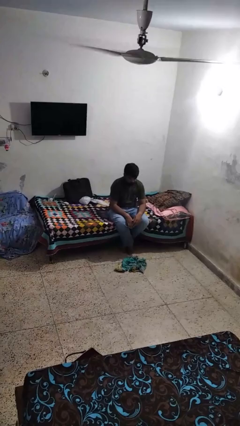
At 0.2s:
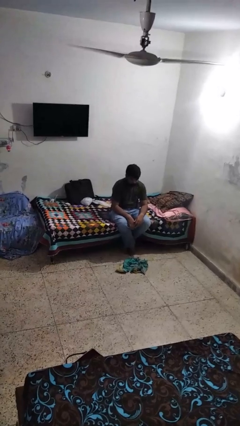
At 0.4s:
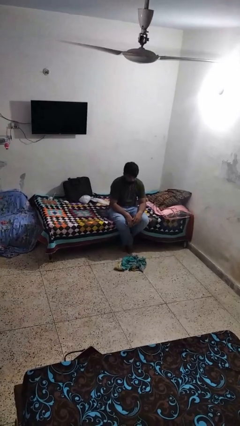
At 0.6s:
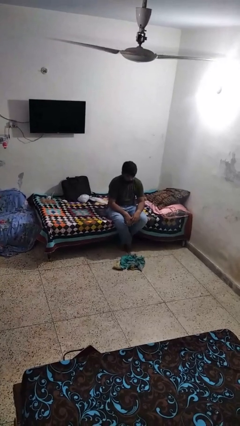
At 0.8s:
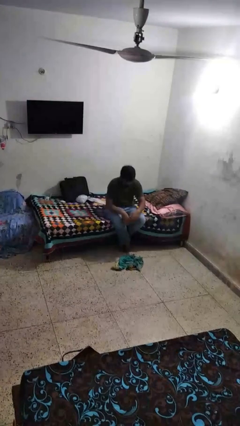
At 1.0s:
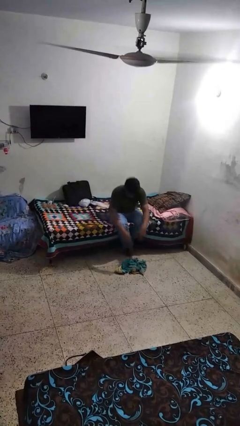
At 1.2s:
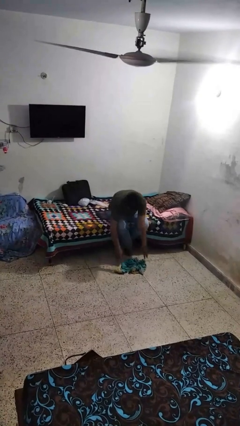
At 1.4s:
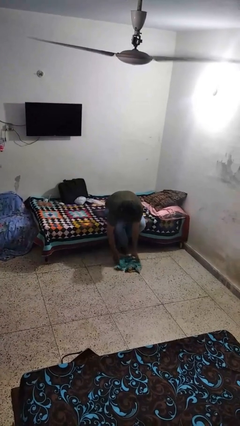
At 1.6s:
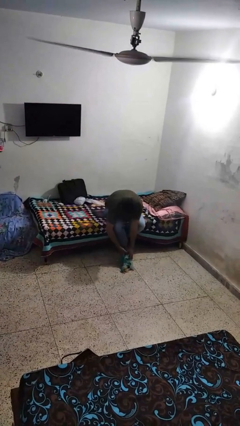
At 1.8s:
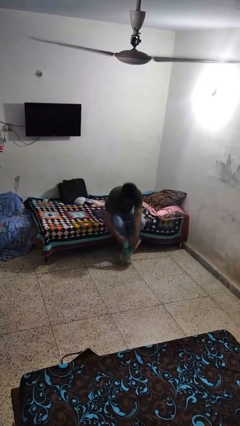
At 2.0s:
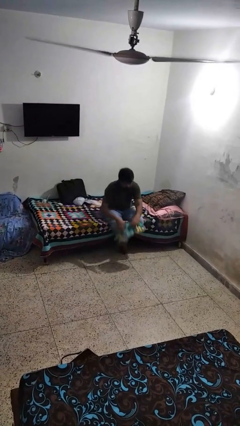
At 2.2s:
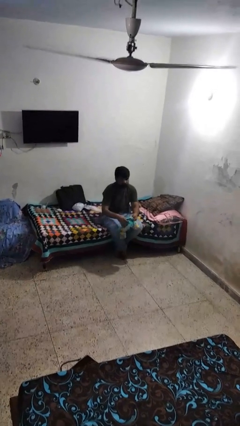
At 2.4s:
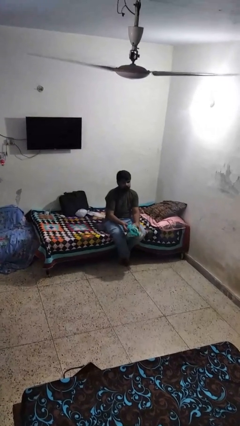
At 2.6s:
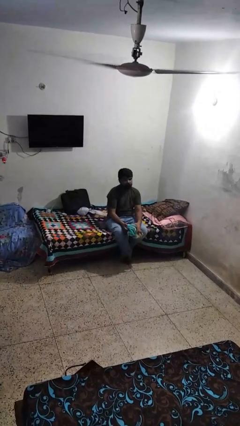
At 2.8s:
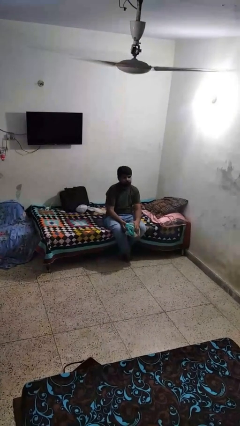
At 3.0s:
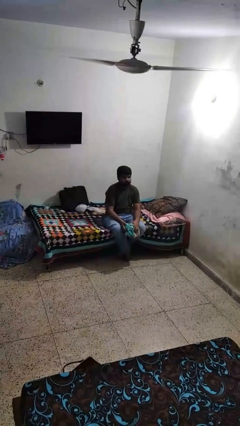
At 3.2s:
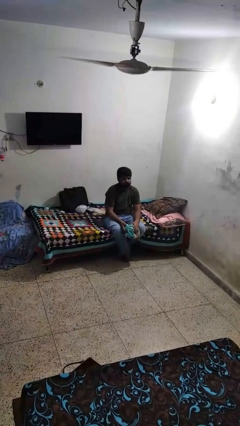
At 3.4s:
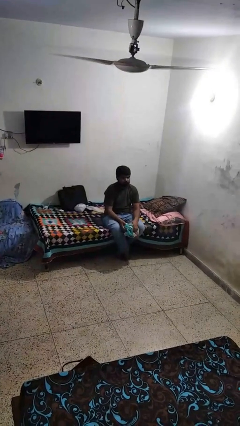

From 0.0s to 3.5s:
person picks up object from floor

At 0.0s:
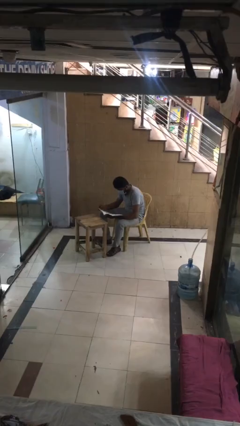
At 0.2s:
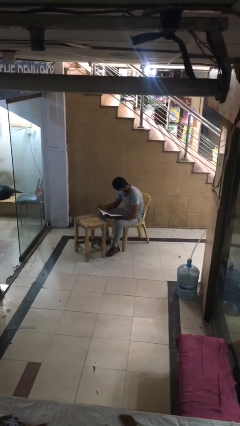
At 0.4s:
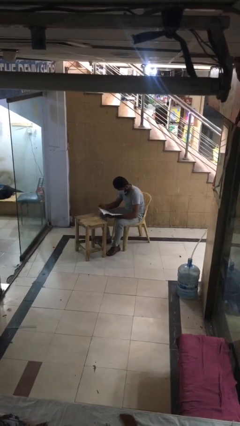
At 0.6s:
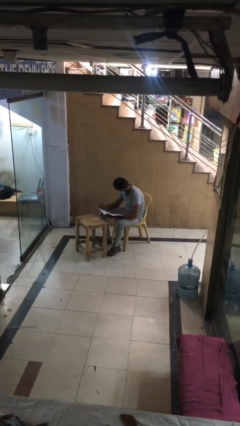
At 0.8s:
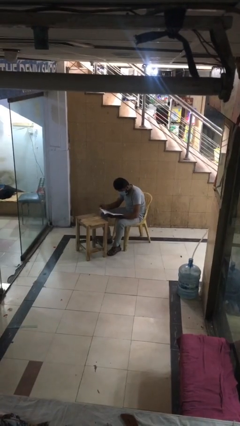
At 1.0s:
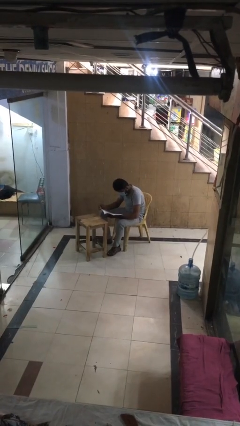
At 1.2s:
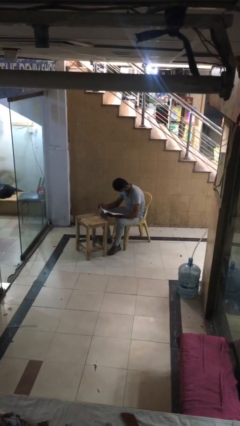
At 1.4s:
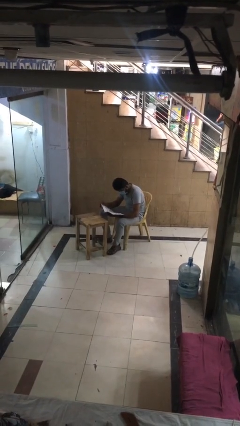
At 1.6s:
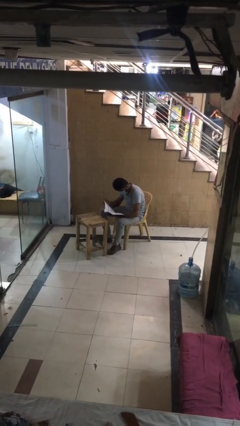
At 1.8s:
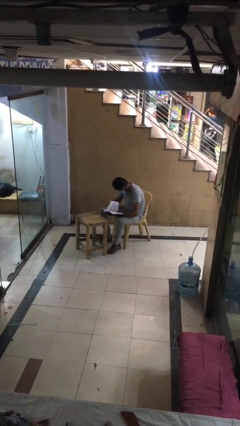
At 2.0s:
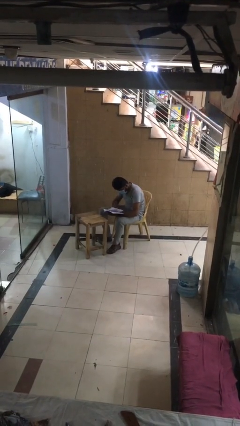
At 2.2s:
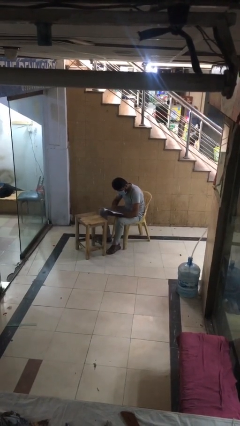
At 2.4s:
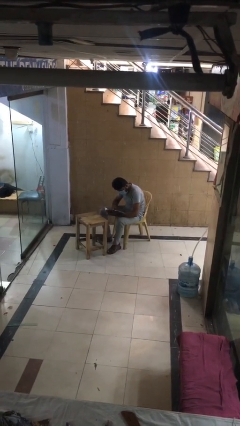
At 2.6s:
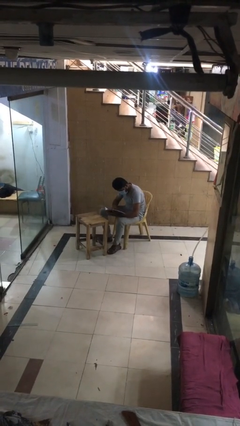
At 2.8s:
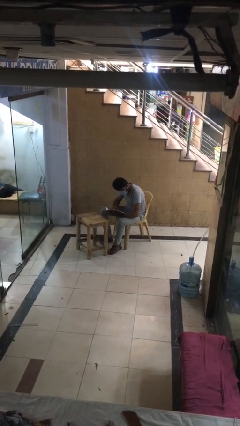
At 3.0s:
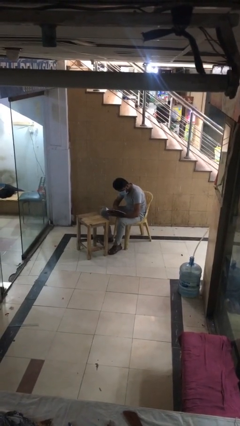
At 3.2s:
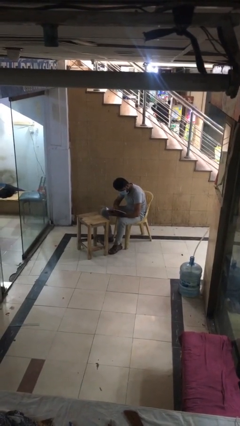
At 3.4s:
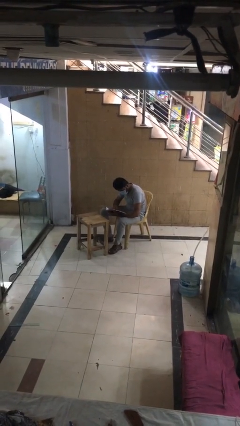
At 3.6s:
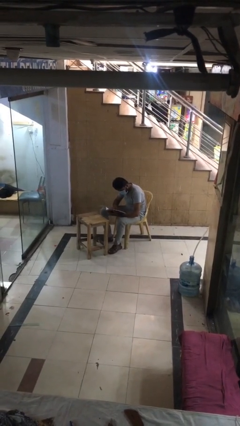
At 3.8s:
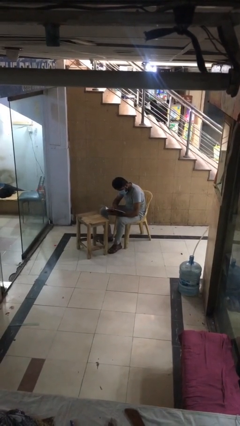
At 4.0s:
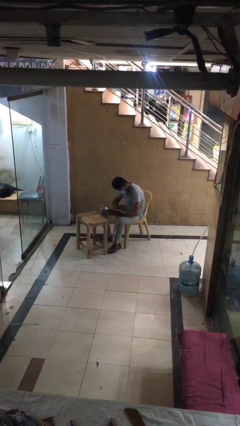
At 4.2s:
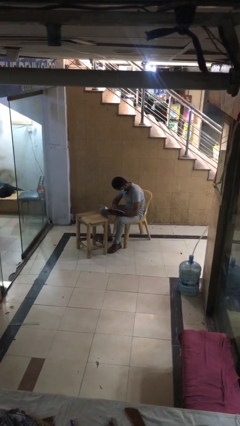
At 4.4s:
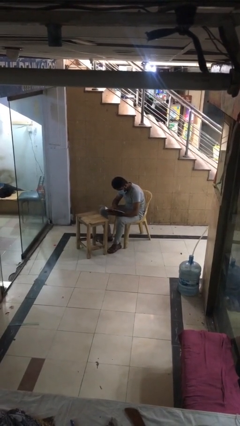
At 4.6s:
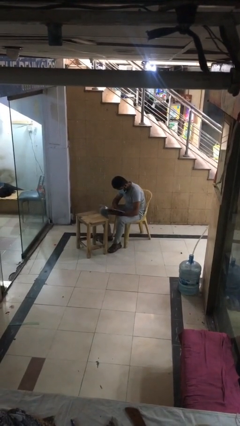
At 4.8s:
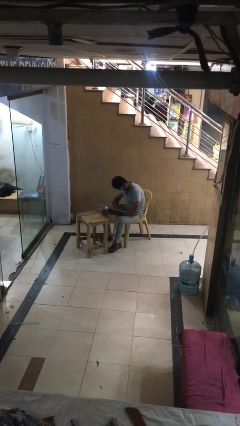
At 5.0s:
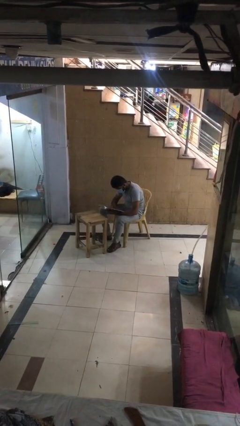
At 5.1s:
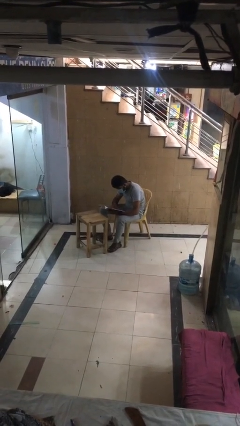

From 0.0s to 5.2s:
person reads document

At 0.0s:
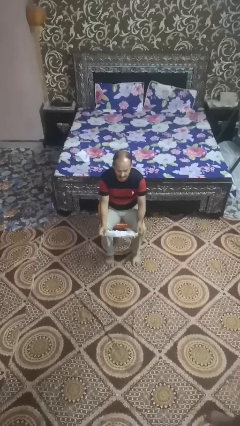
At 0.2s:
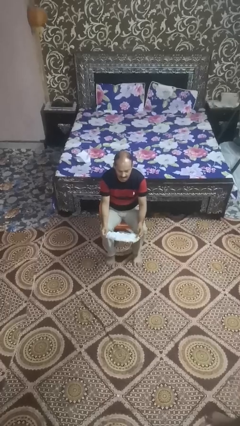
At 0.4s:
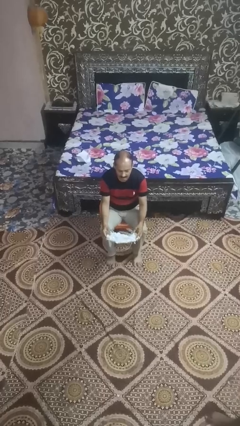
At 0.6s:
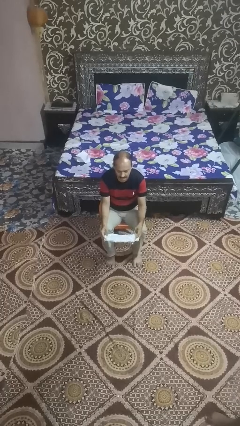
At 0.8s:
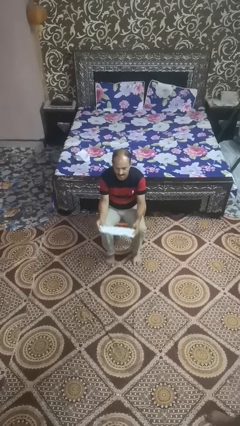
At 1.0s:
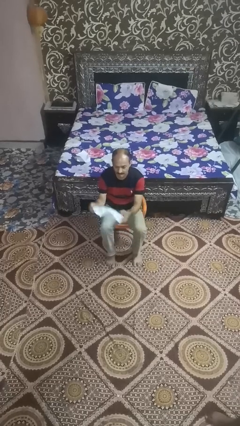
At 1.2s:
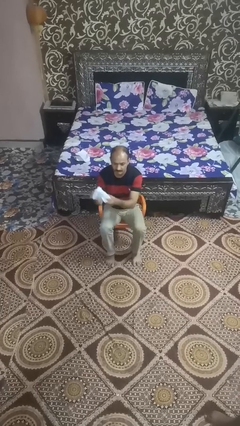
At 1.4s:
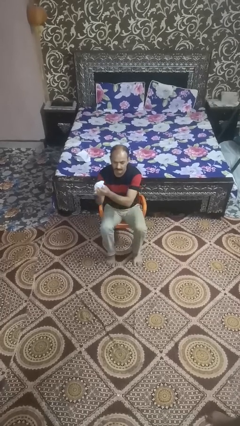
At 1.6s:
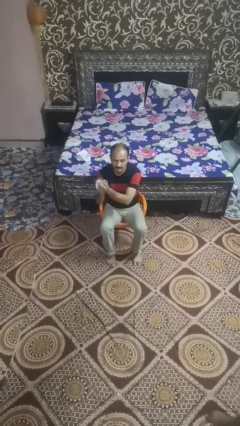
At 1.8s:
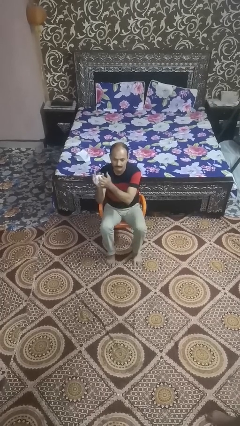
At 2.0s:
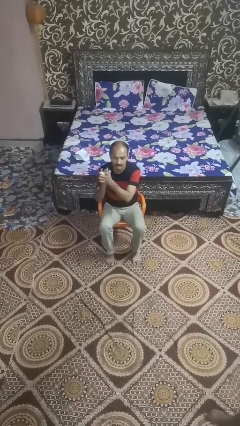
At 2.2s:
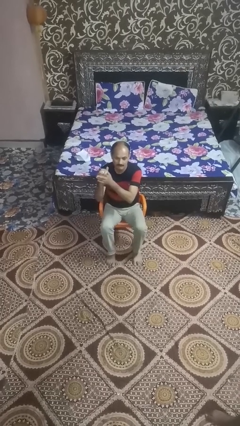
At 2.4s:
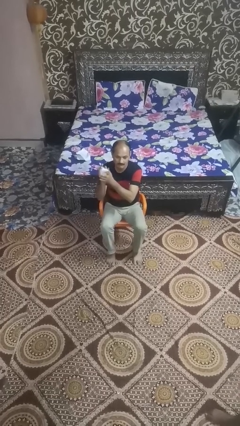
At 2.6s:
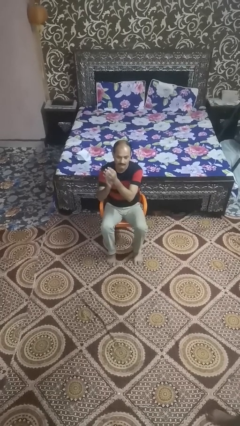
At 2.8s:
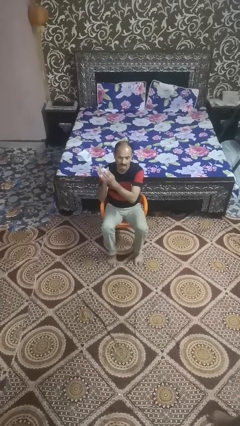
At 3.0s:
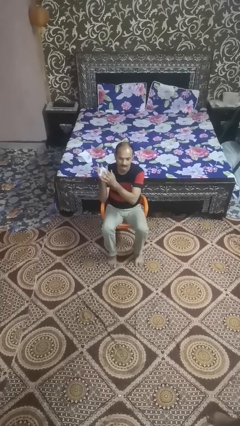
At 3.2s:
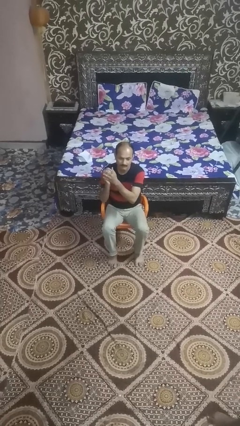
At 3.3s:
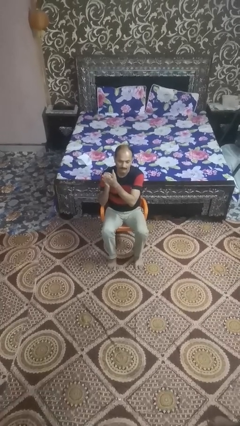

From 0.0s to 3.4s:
person crumples paper

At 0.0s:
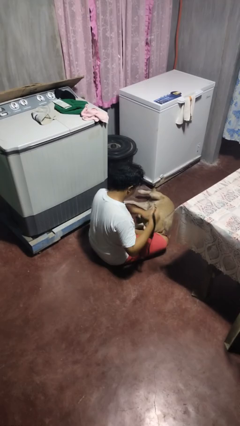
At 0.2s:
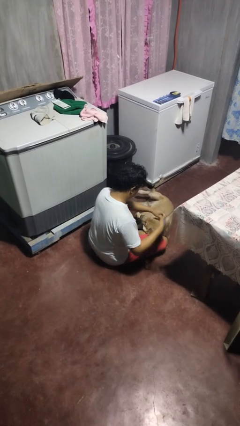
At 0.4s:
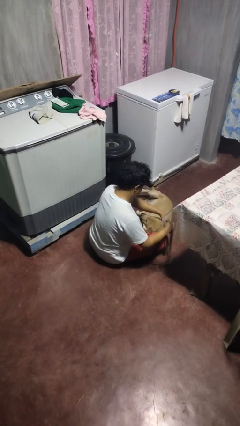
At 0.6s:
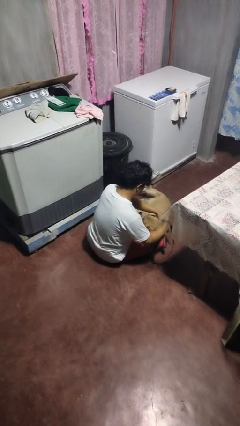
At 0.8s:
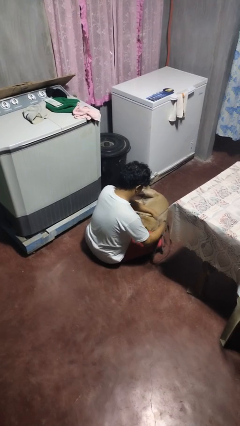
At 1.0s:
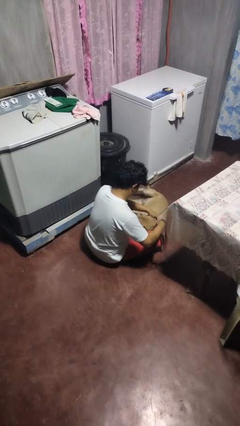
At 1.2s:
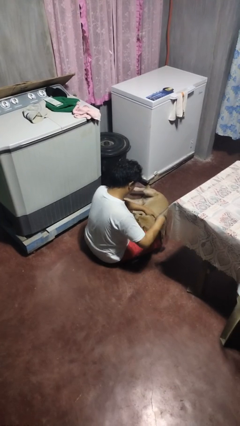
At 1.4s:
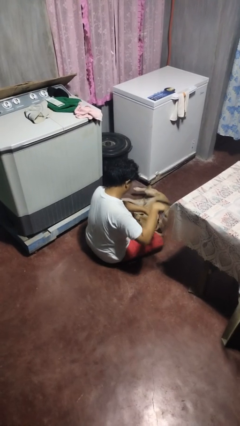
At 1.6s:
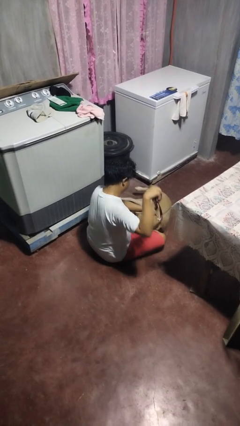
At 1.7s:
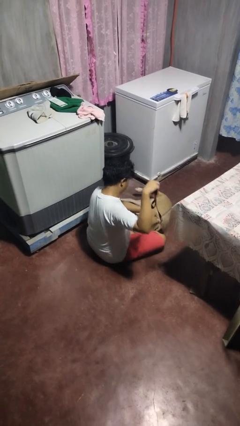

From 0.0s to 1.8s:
person attaches leash to dog

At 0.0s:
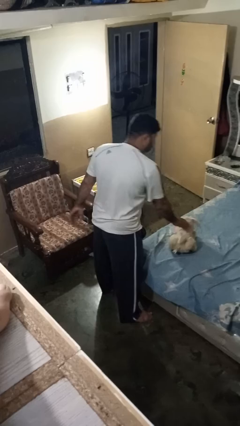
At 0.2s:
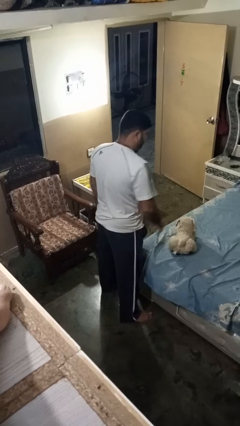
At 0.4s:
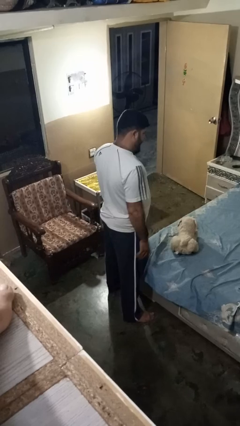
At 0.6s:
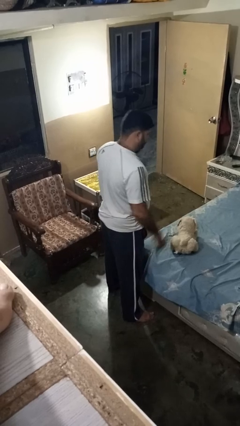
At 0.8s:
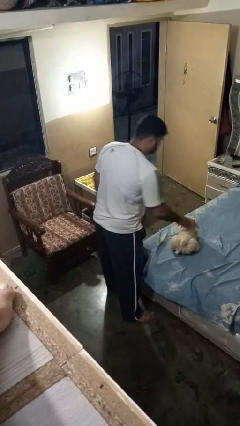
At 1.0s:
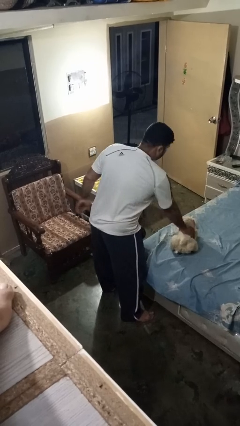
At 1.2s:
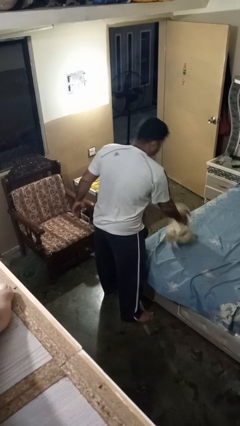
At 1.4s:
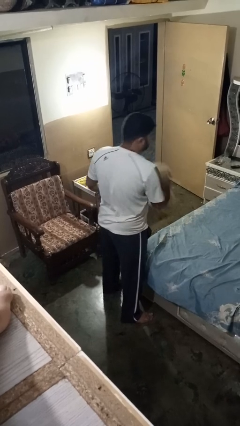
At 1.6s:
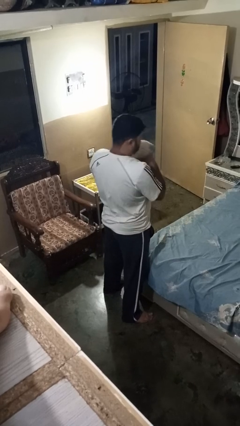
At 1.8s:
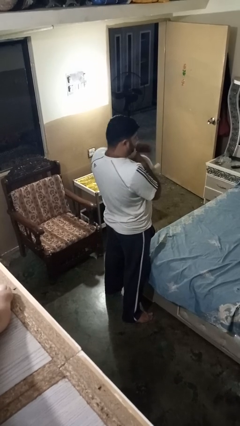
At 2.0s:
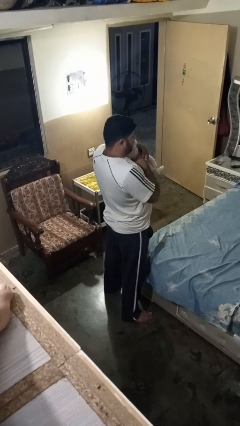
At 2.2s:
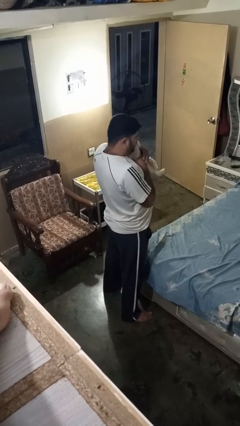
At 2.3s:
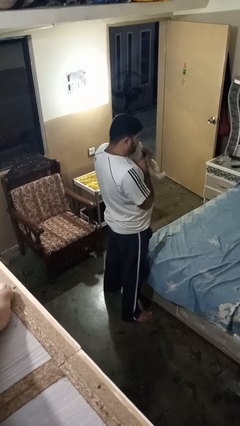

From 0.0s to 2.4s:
person hugs stuffed animal

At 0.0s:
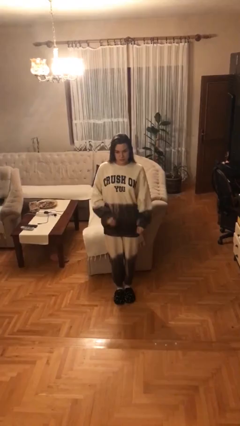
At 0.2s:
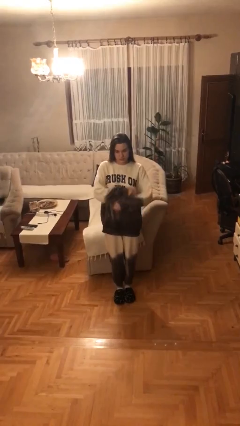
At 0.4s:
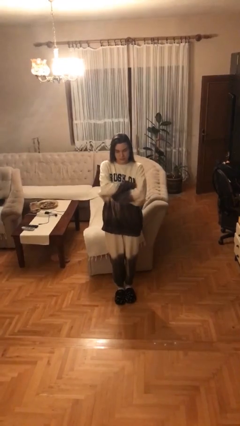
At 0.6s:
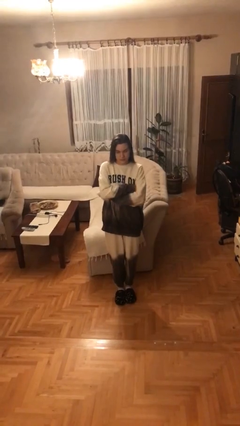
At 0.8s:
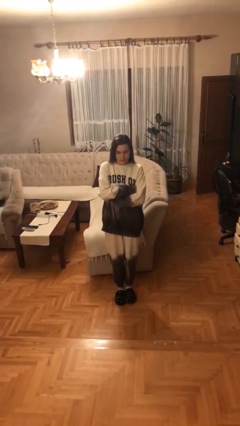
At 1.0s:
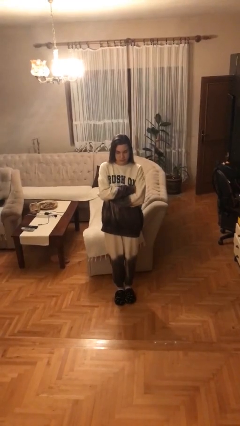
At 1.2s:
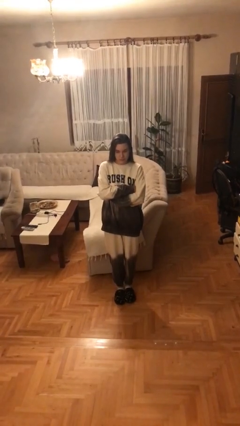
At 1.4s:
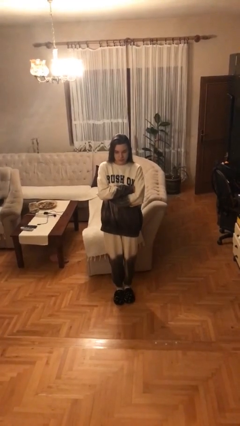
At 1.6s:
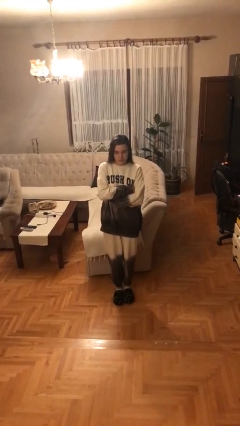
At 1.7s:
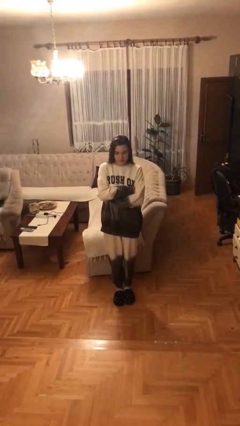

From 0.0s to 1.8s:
person crosses arms
